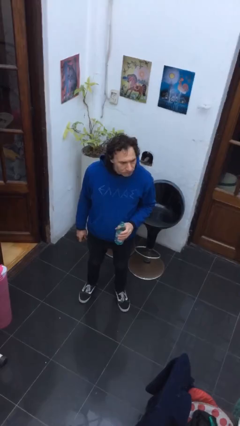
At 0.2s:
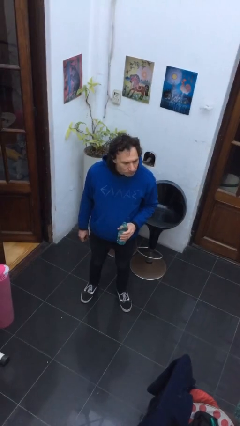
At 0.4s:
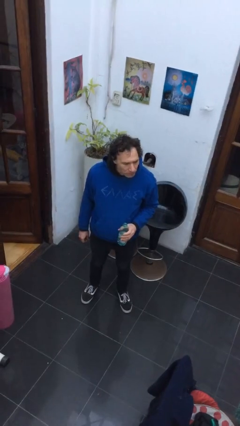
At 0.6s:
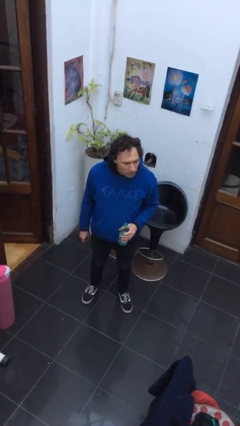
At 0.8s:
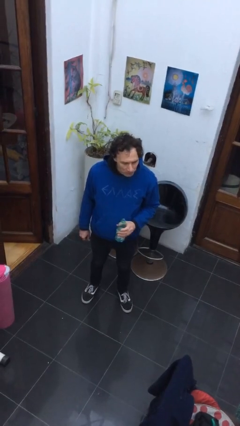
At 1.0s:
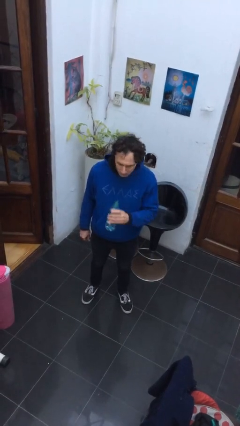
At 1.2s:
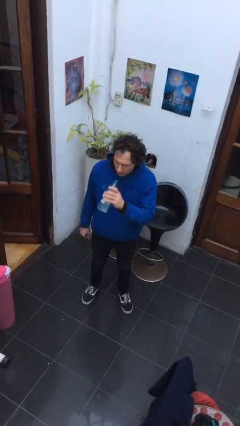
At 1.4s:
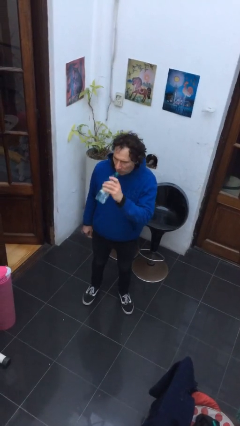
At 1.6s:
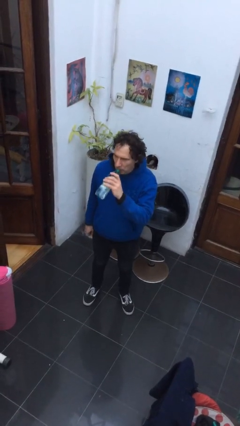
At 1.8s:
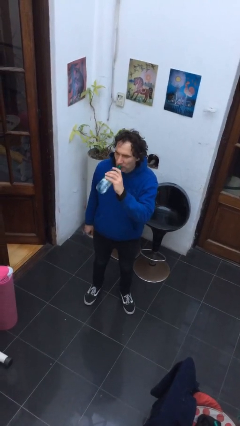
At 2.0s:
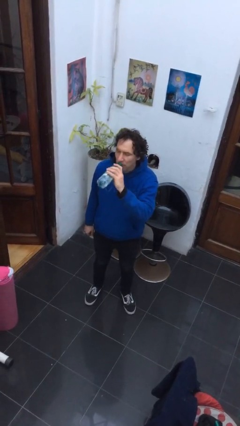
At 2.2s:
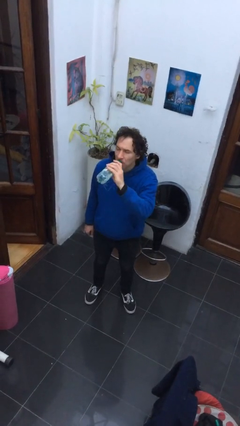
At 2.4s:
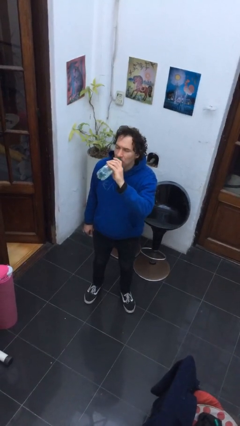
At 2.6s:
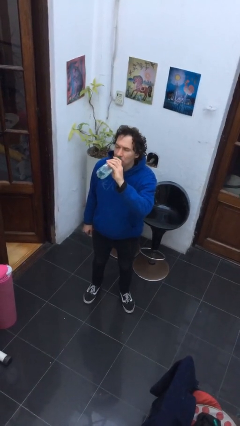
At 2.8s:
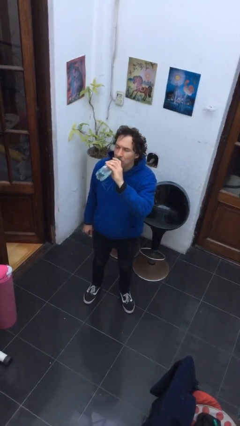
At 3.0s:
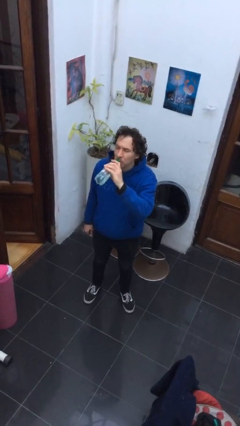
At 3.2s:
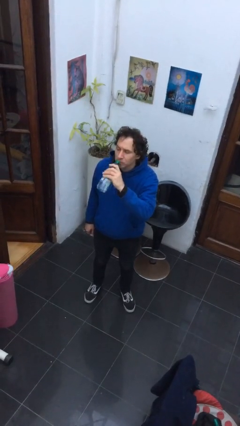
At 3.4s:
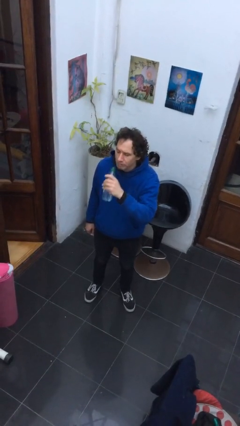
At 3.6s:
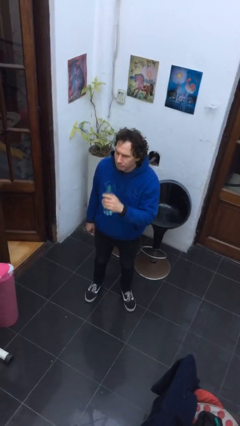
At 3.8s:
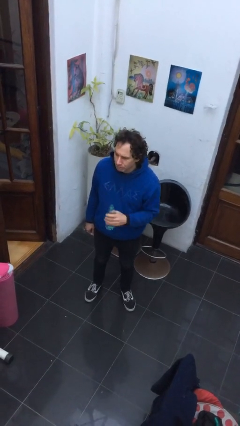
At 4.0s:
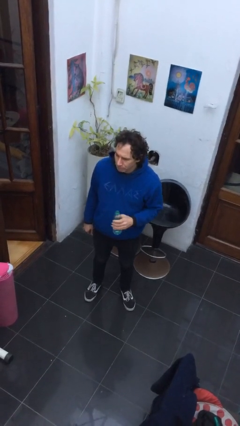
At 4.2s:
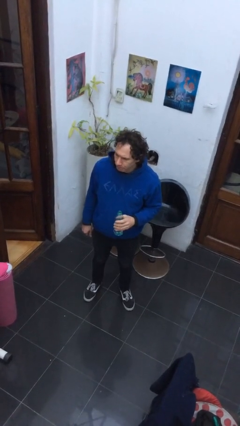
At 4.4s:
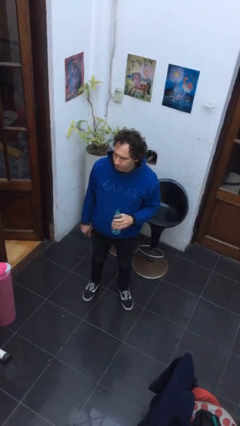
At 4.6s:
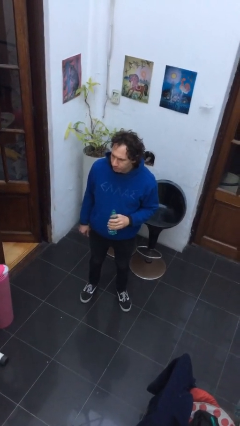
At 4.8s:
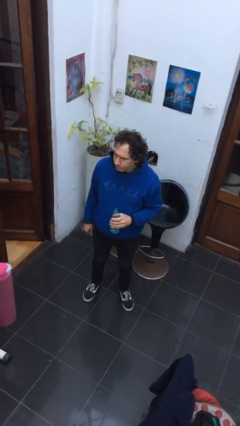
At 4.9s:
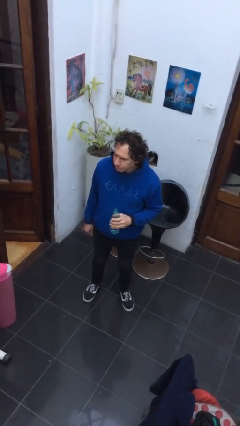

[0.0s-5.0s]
person drinks from bottle

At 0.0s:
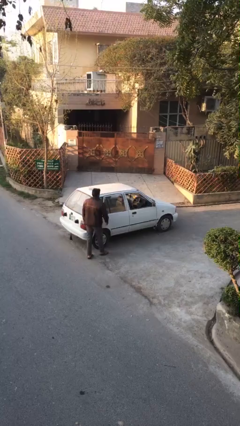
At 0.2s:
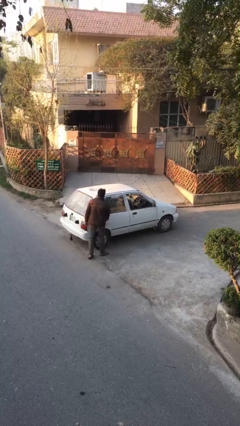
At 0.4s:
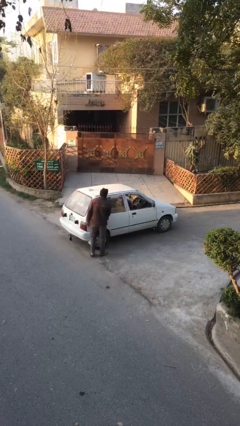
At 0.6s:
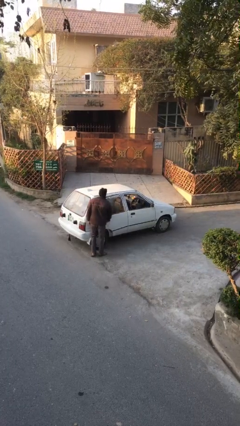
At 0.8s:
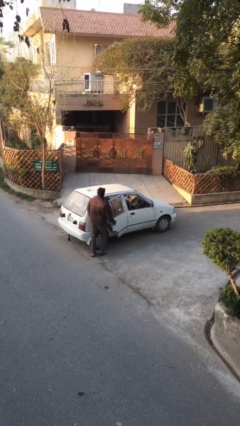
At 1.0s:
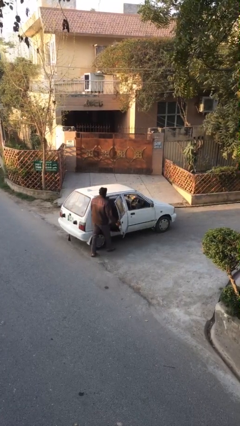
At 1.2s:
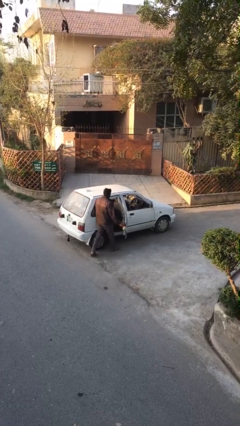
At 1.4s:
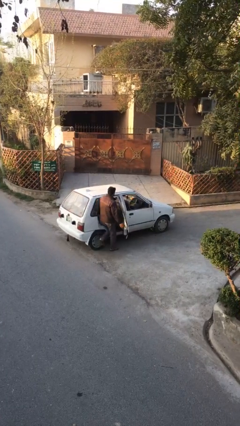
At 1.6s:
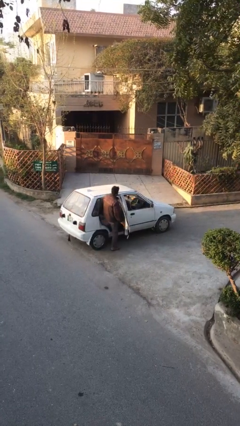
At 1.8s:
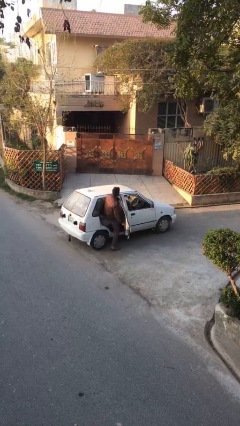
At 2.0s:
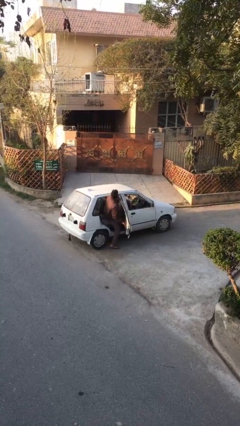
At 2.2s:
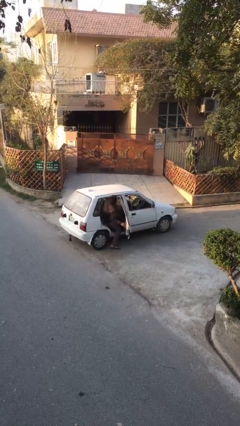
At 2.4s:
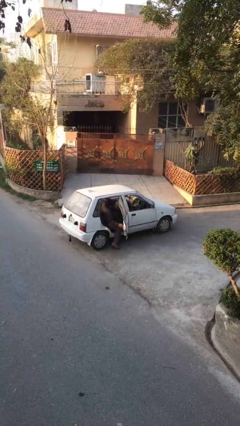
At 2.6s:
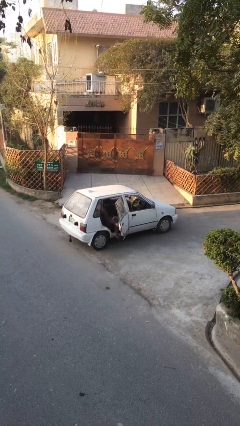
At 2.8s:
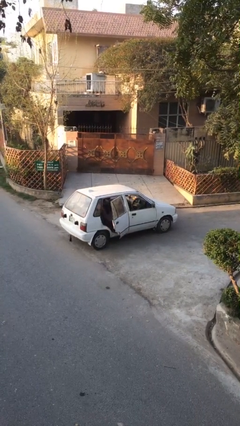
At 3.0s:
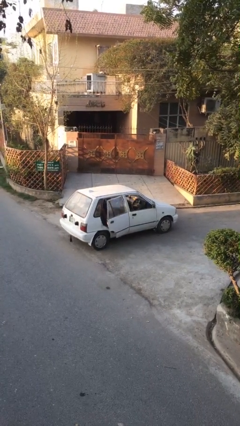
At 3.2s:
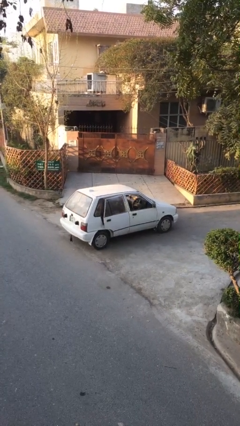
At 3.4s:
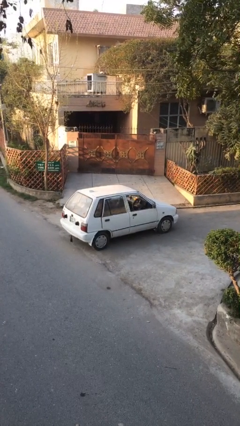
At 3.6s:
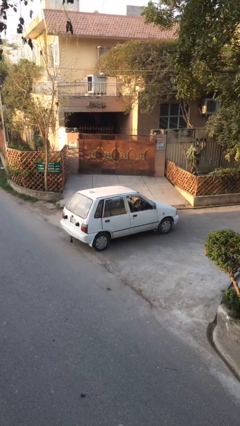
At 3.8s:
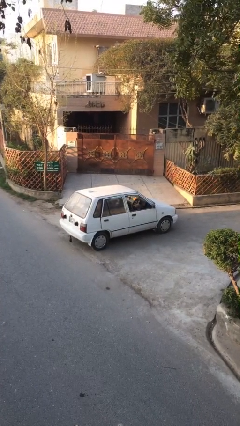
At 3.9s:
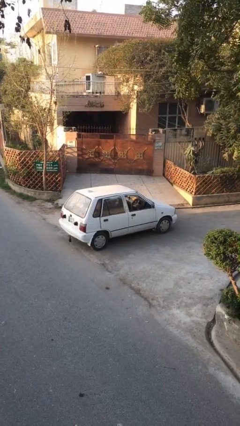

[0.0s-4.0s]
car picks up person

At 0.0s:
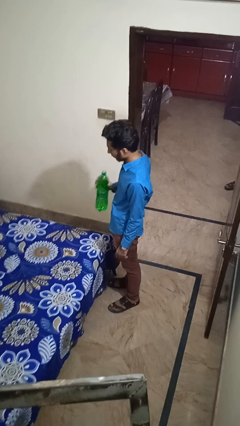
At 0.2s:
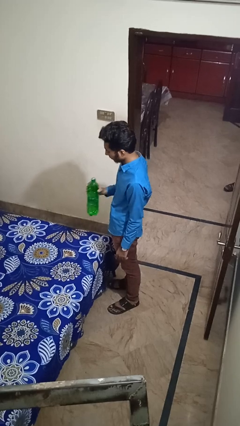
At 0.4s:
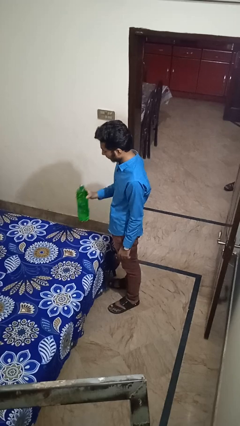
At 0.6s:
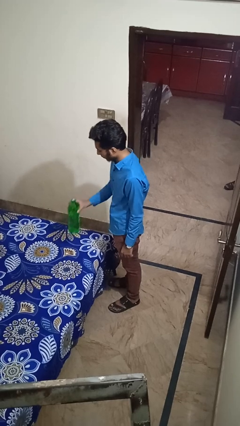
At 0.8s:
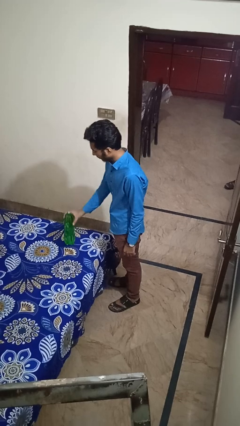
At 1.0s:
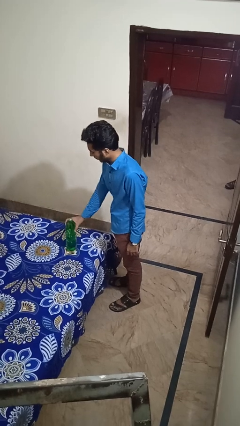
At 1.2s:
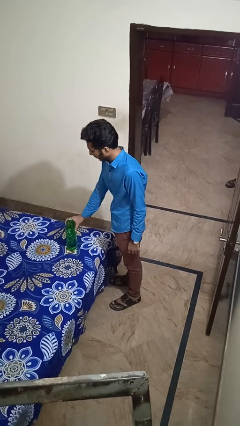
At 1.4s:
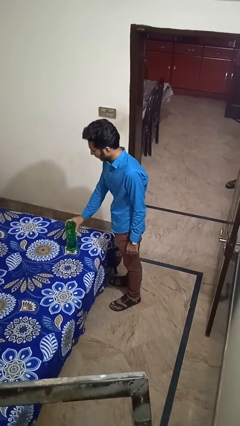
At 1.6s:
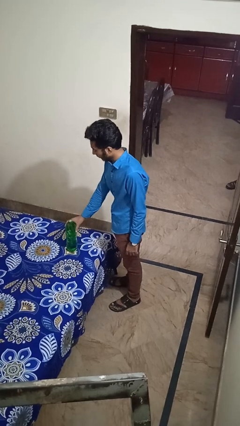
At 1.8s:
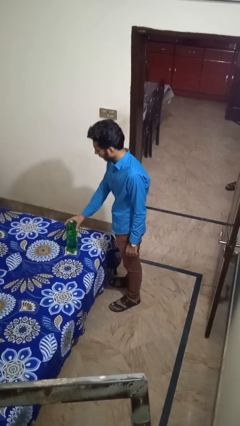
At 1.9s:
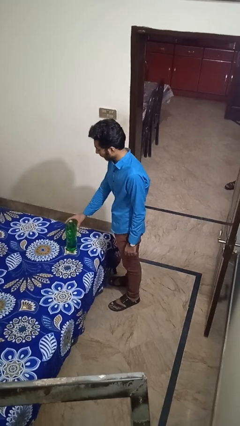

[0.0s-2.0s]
person puts down object on bed

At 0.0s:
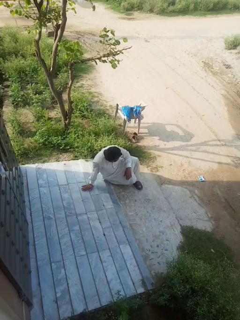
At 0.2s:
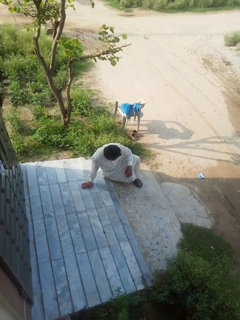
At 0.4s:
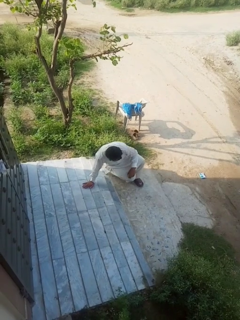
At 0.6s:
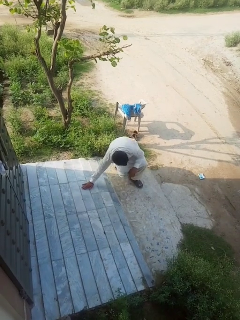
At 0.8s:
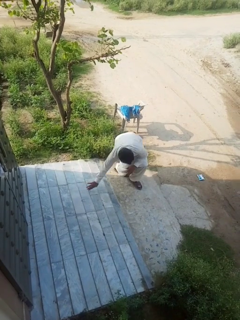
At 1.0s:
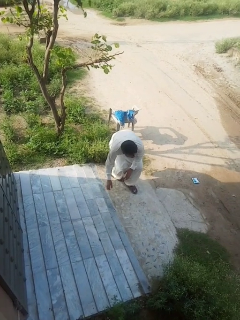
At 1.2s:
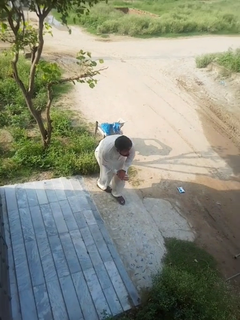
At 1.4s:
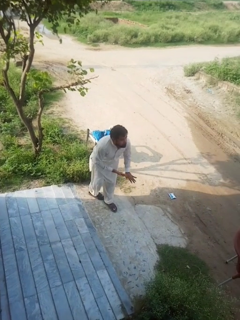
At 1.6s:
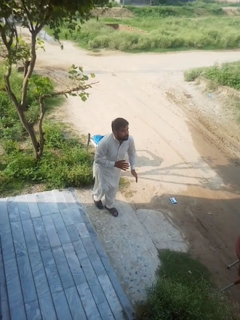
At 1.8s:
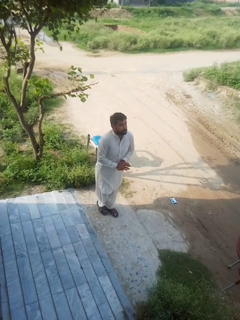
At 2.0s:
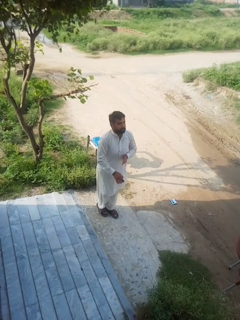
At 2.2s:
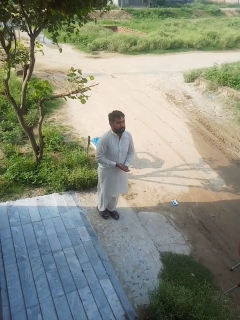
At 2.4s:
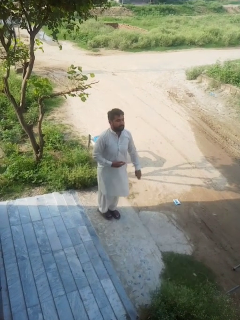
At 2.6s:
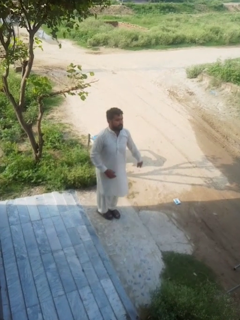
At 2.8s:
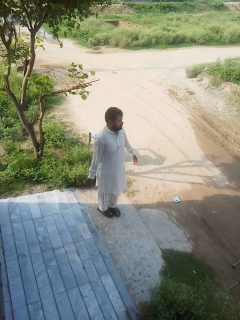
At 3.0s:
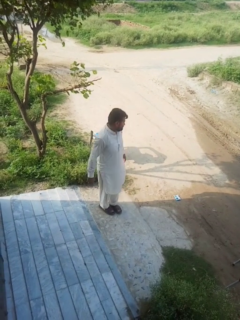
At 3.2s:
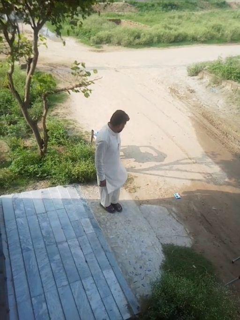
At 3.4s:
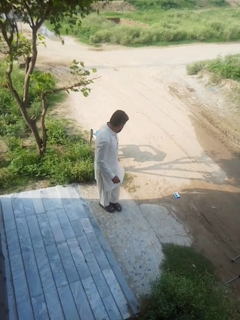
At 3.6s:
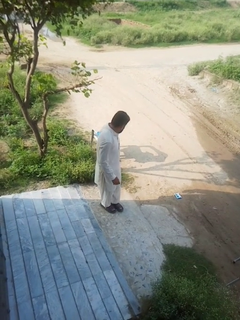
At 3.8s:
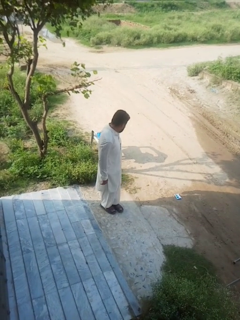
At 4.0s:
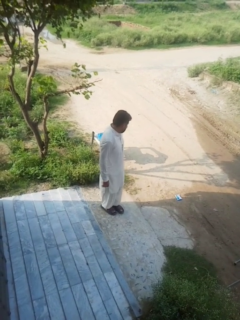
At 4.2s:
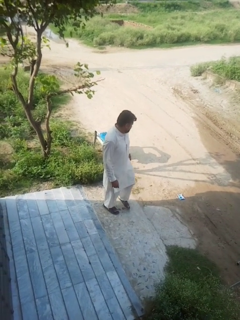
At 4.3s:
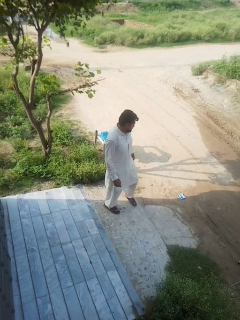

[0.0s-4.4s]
person stands up from floor

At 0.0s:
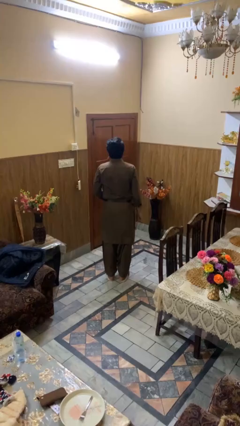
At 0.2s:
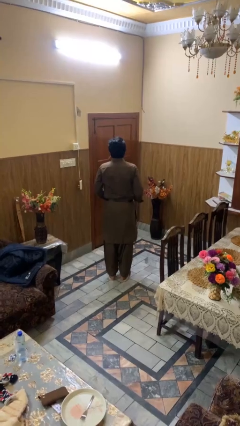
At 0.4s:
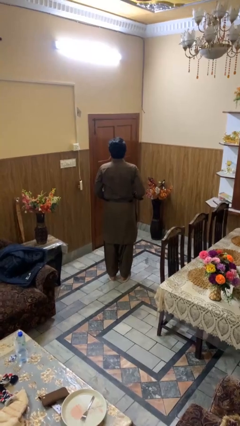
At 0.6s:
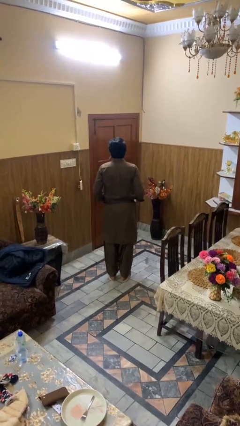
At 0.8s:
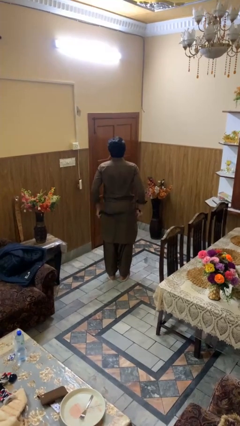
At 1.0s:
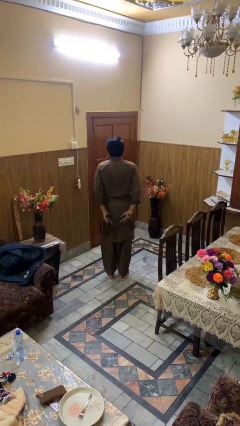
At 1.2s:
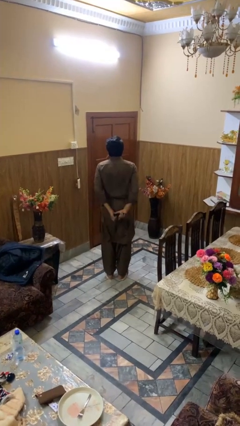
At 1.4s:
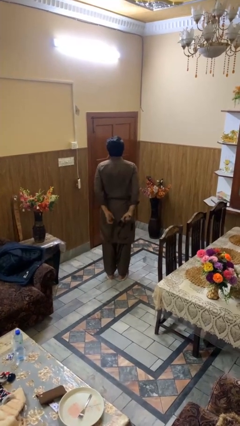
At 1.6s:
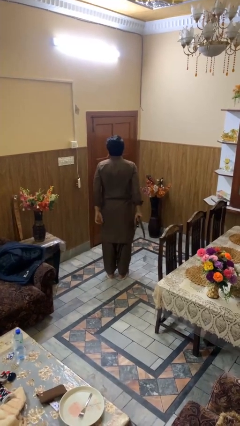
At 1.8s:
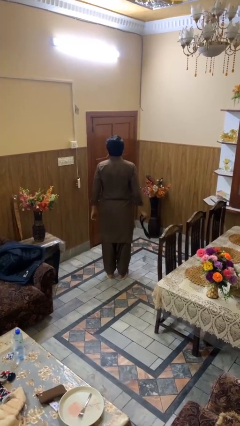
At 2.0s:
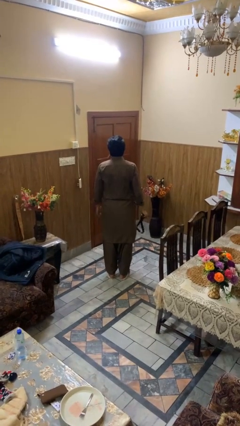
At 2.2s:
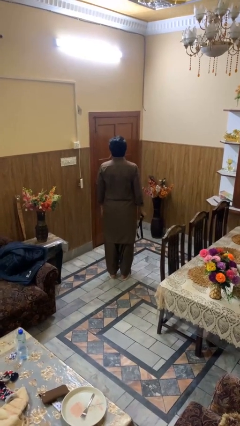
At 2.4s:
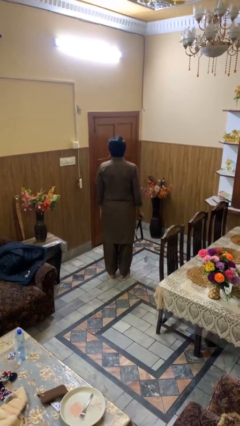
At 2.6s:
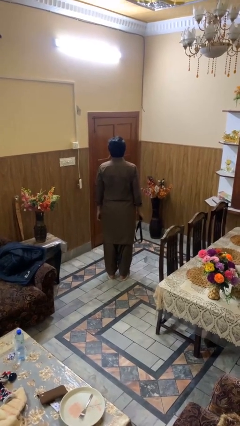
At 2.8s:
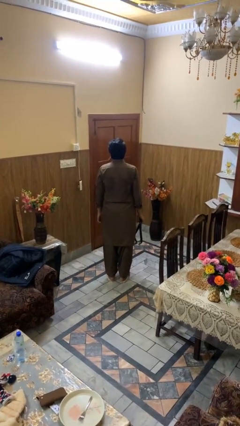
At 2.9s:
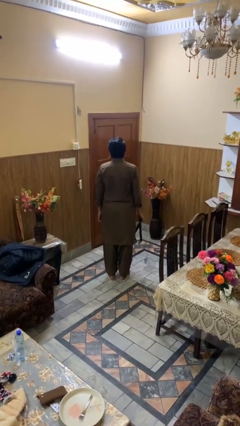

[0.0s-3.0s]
person takes off belt

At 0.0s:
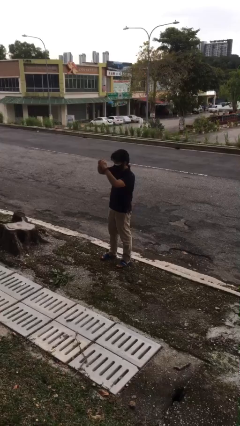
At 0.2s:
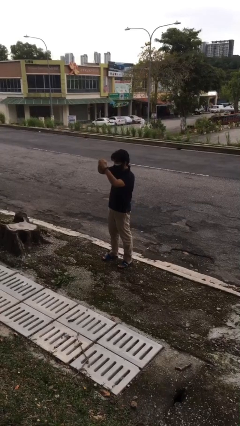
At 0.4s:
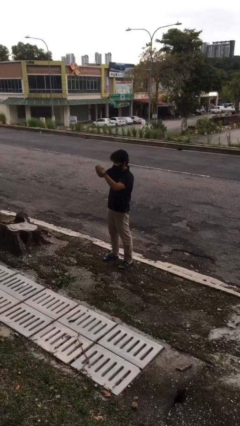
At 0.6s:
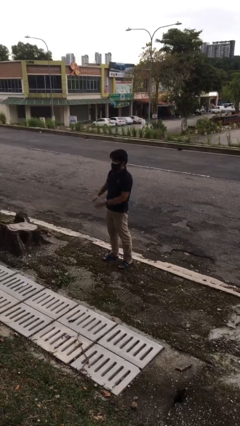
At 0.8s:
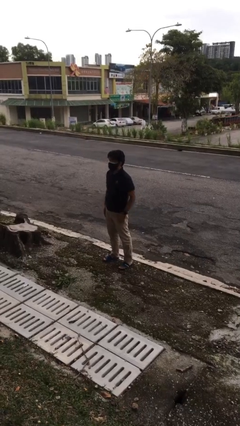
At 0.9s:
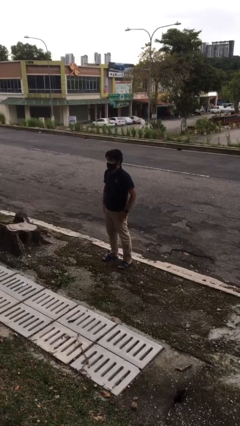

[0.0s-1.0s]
person gestures heart
